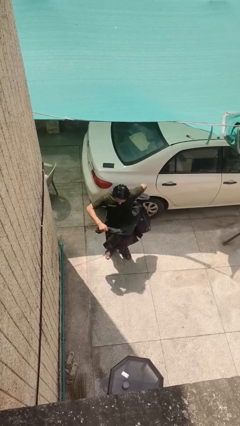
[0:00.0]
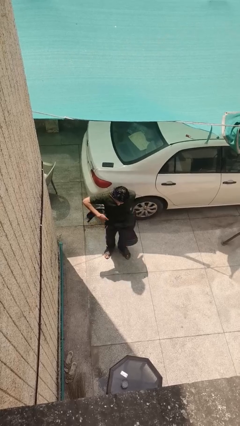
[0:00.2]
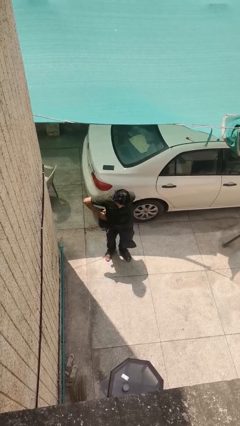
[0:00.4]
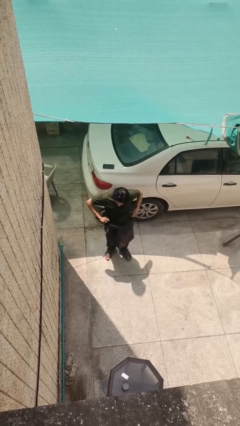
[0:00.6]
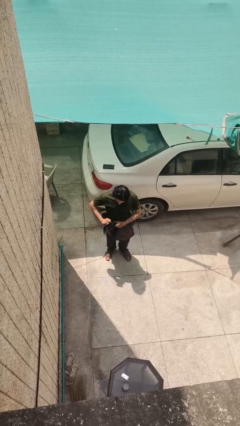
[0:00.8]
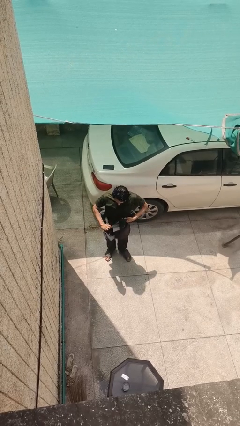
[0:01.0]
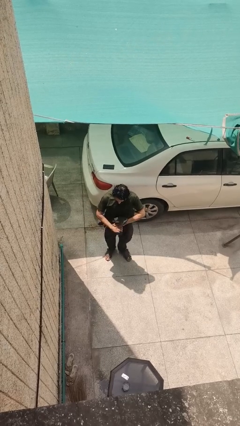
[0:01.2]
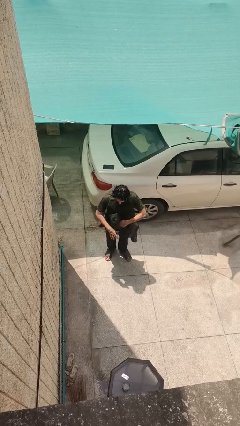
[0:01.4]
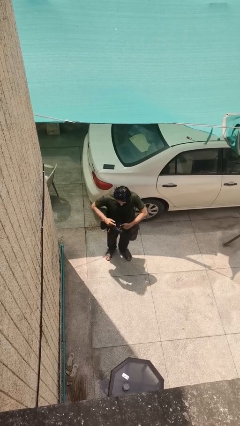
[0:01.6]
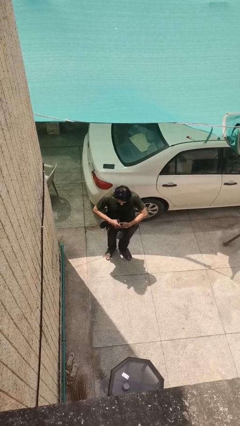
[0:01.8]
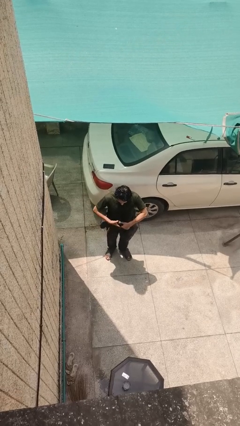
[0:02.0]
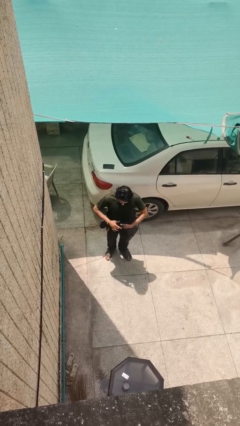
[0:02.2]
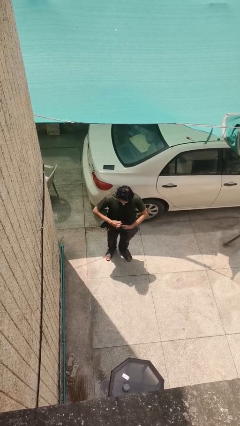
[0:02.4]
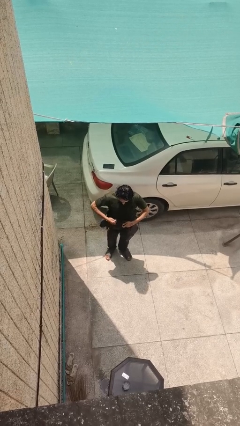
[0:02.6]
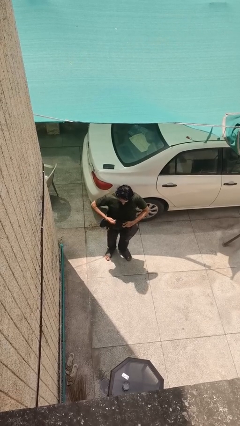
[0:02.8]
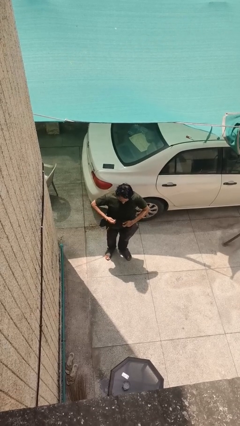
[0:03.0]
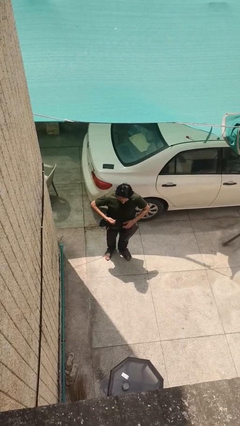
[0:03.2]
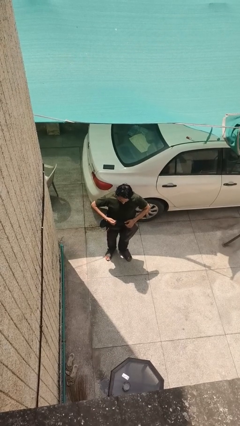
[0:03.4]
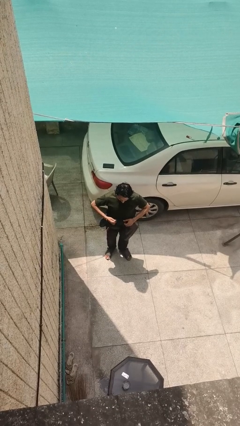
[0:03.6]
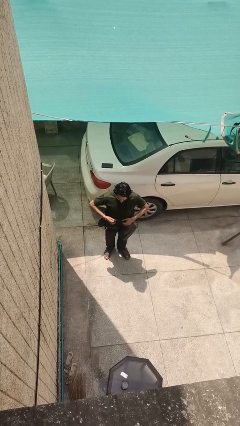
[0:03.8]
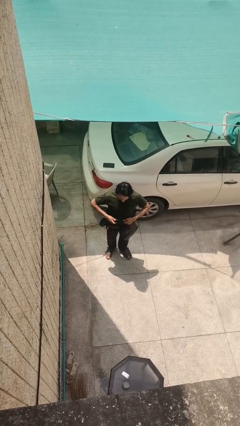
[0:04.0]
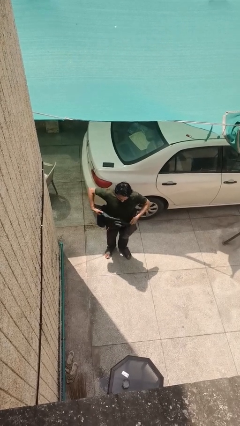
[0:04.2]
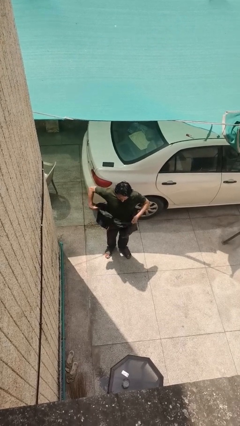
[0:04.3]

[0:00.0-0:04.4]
person ties jacket around waist

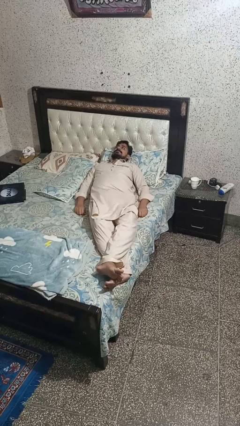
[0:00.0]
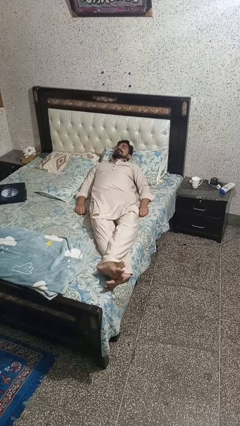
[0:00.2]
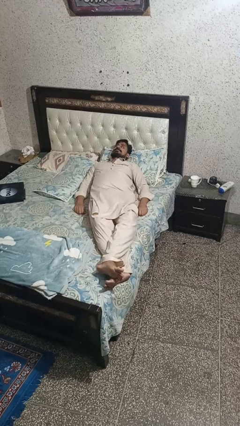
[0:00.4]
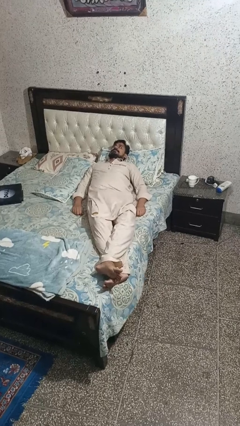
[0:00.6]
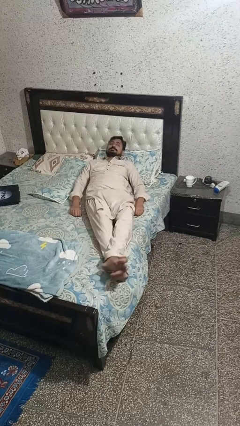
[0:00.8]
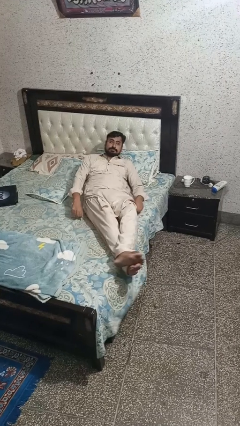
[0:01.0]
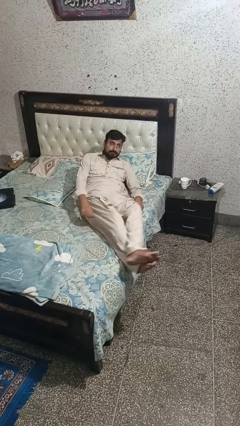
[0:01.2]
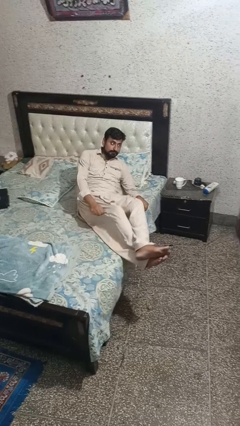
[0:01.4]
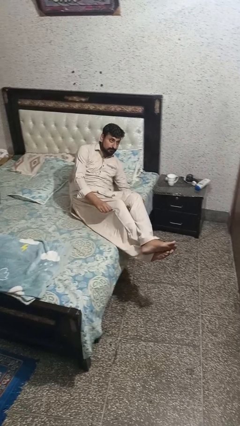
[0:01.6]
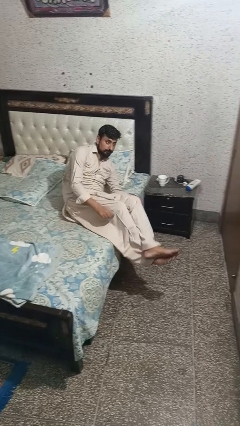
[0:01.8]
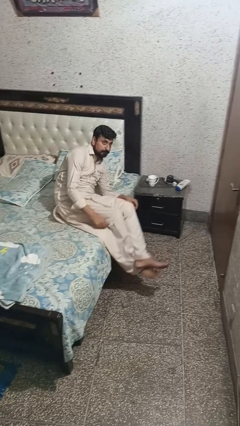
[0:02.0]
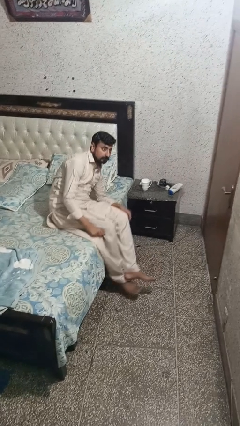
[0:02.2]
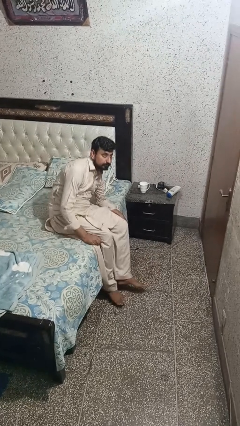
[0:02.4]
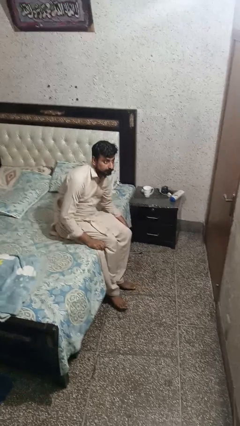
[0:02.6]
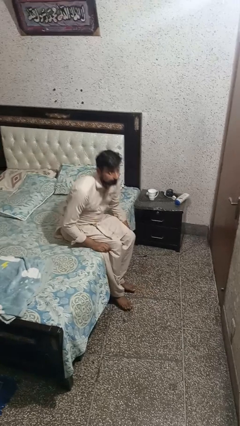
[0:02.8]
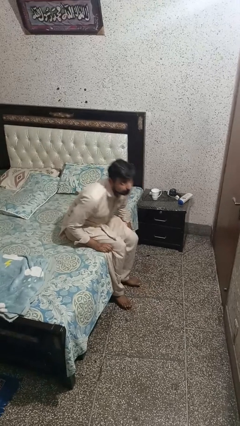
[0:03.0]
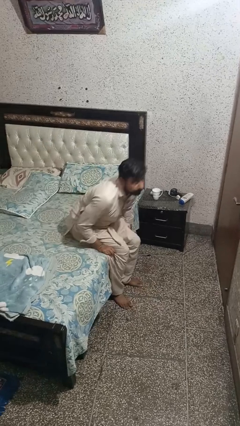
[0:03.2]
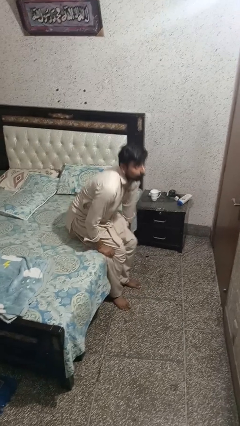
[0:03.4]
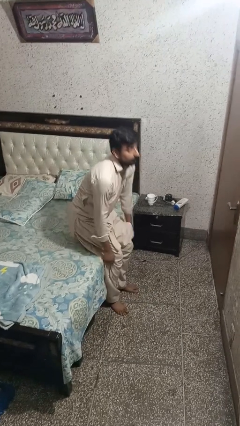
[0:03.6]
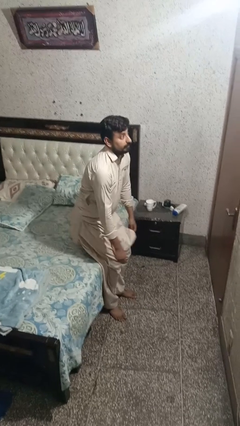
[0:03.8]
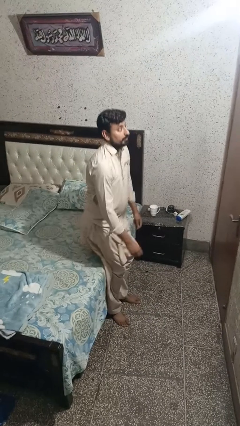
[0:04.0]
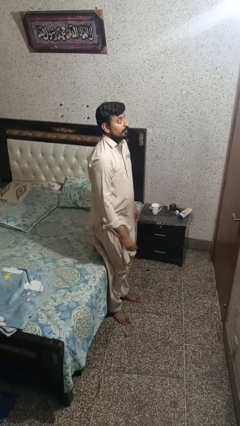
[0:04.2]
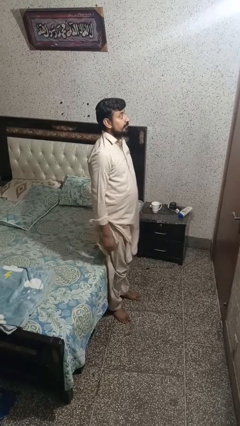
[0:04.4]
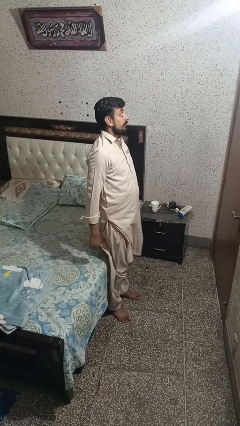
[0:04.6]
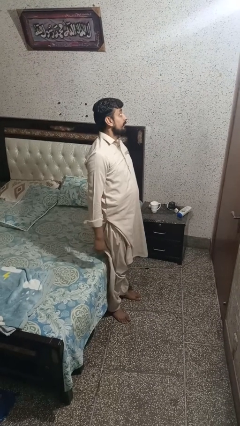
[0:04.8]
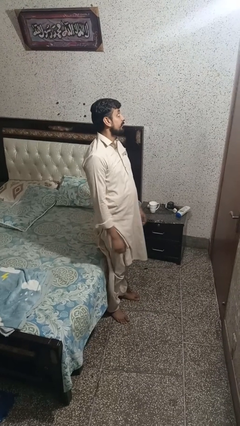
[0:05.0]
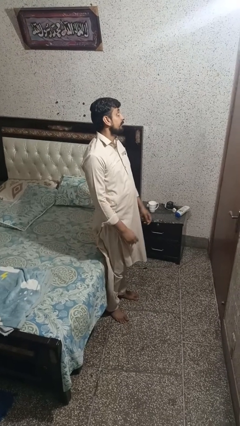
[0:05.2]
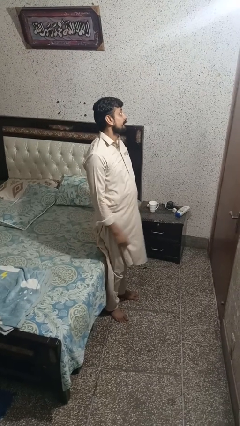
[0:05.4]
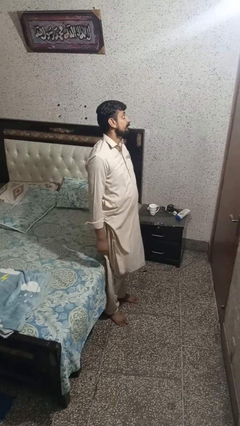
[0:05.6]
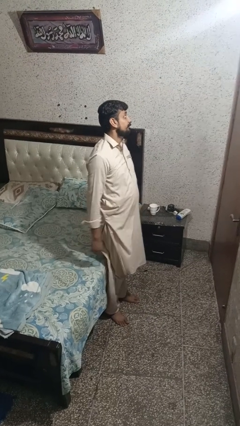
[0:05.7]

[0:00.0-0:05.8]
person stands up

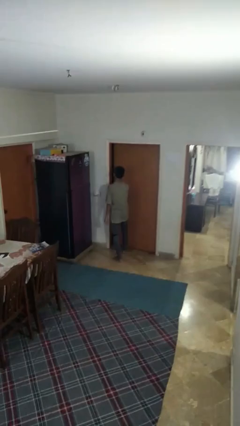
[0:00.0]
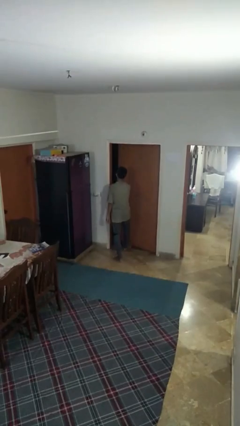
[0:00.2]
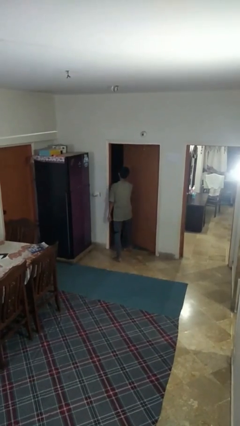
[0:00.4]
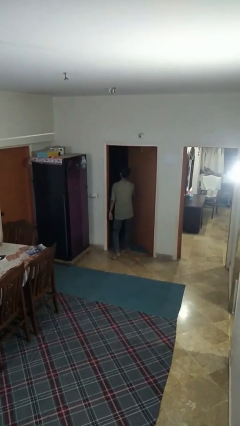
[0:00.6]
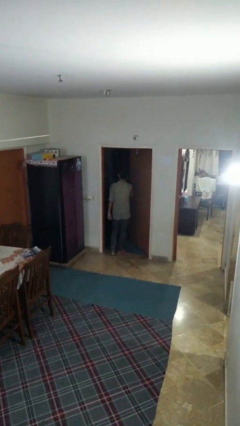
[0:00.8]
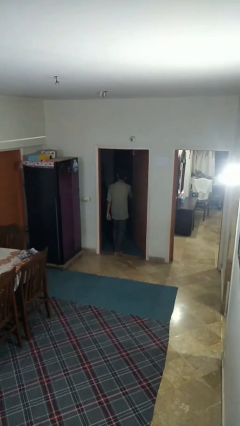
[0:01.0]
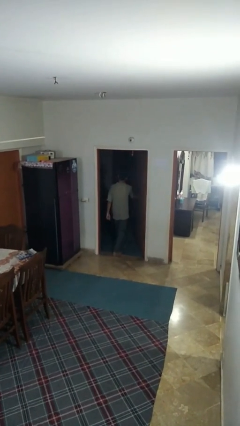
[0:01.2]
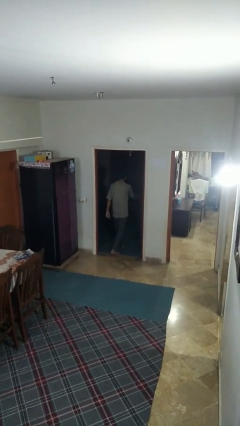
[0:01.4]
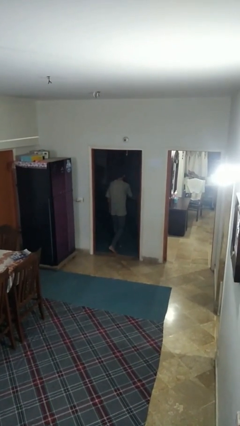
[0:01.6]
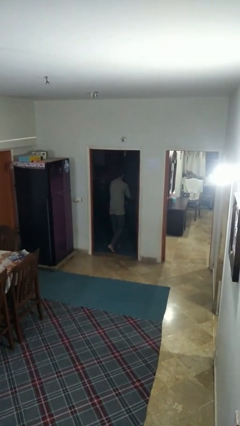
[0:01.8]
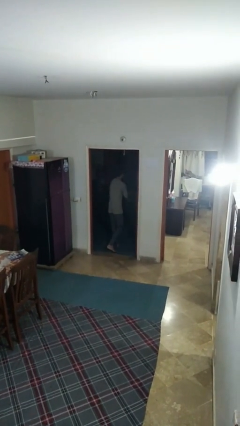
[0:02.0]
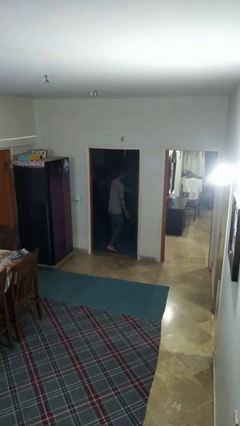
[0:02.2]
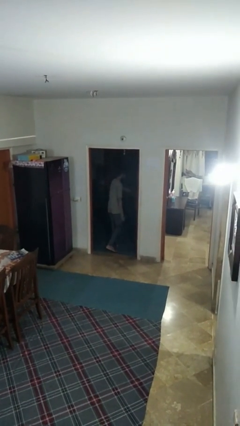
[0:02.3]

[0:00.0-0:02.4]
person opens facility door

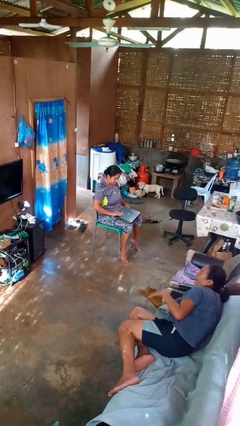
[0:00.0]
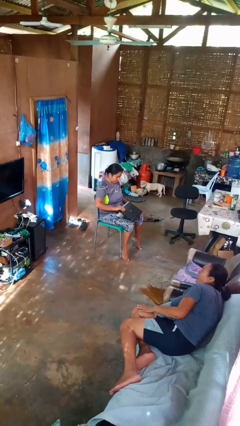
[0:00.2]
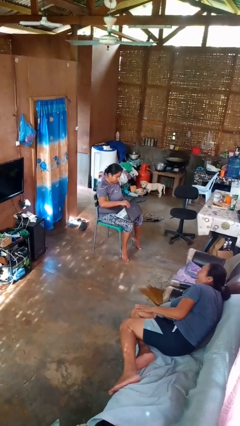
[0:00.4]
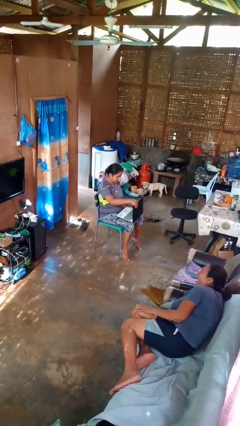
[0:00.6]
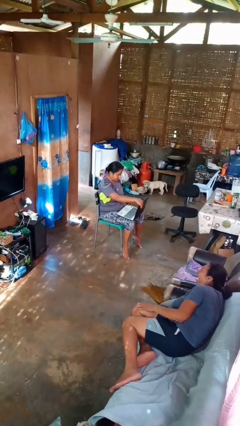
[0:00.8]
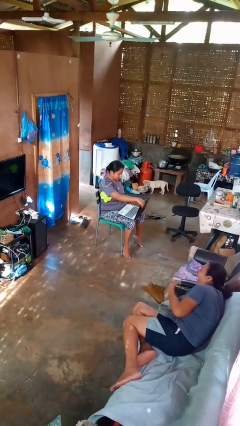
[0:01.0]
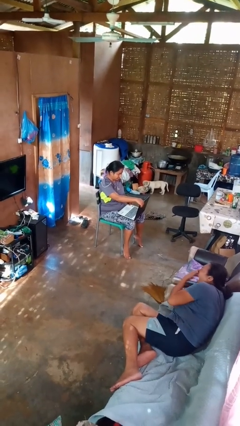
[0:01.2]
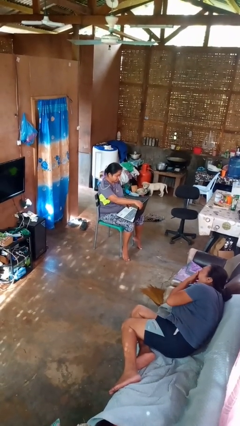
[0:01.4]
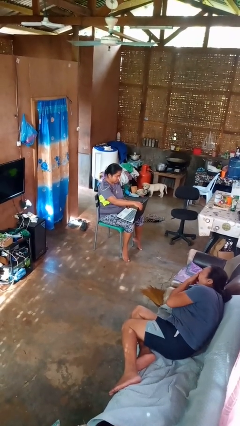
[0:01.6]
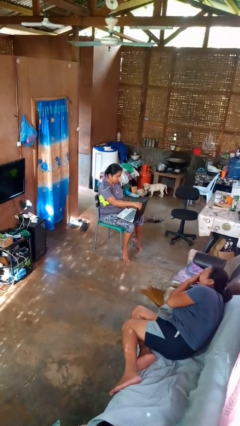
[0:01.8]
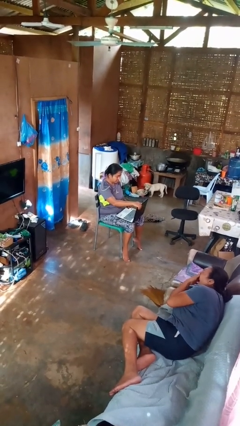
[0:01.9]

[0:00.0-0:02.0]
person opens laptop

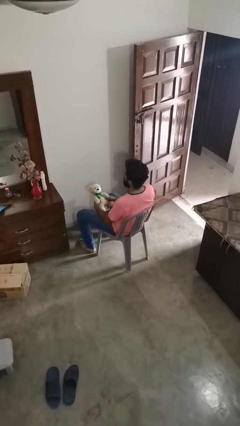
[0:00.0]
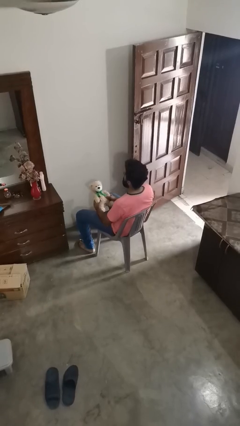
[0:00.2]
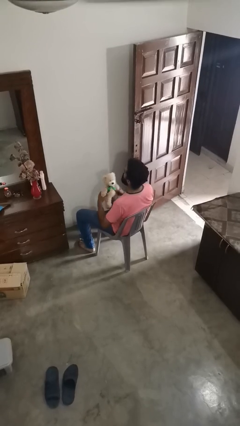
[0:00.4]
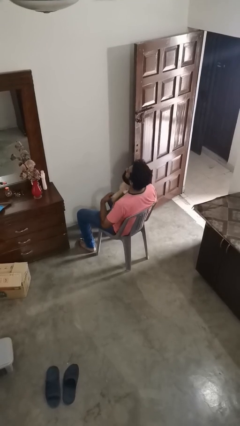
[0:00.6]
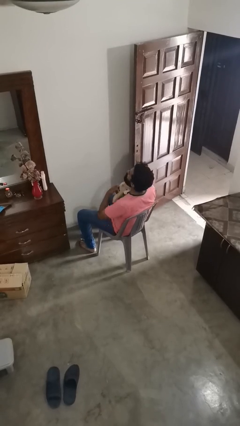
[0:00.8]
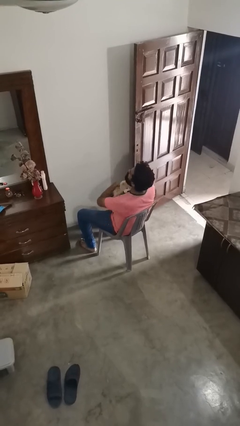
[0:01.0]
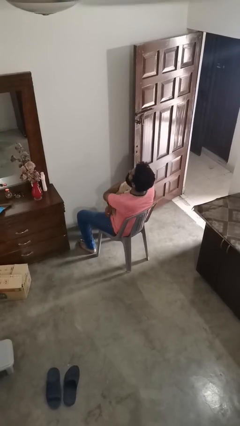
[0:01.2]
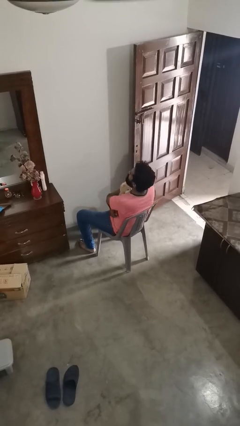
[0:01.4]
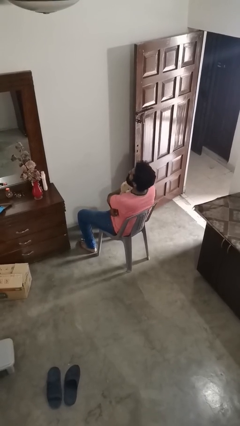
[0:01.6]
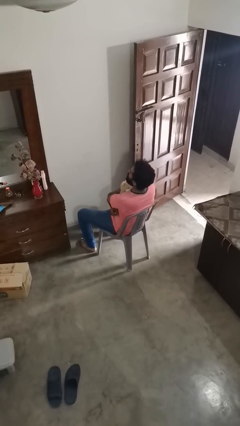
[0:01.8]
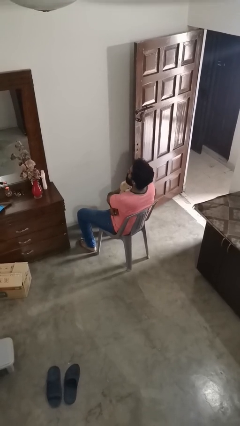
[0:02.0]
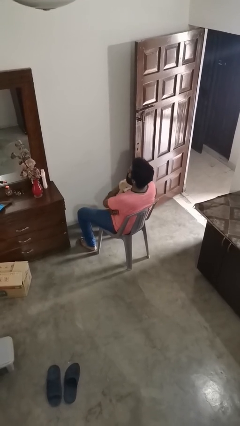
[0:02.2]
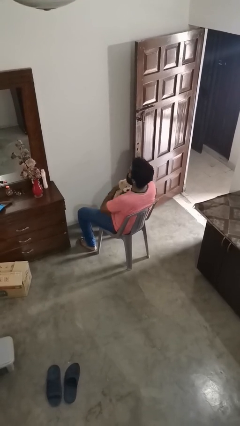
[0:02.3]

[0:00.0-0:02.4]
person hugs stuffed animal

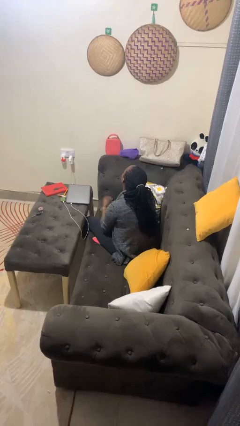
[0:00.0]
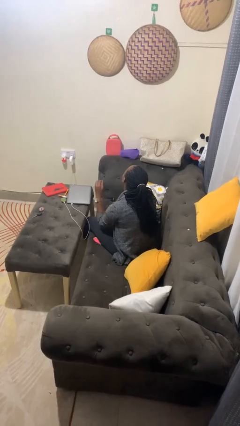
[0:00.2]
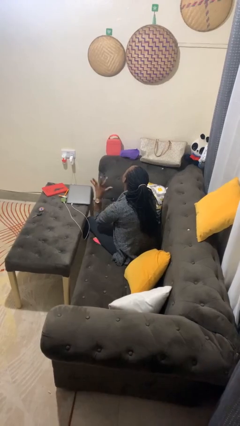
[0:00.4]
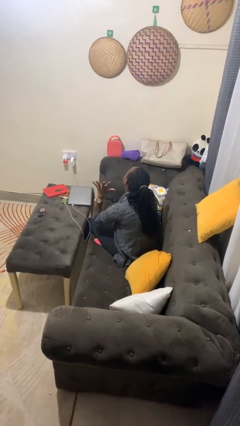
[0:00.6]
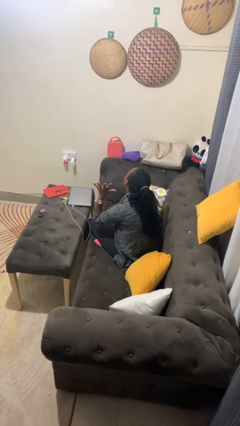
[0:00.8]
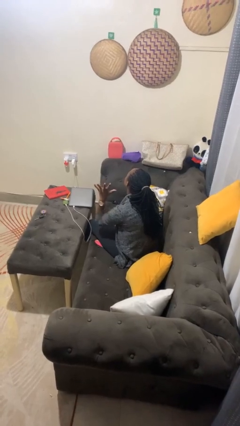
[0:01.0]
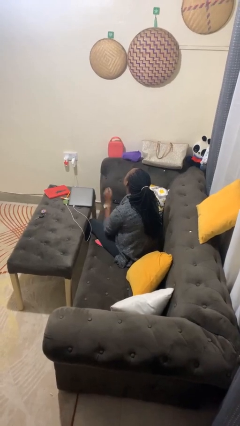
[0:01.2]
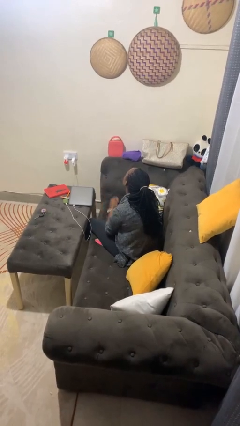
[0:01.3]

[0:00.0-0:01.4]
person gestures number five
